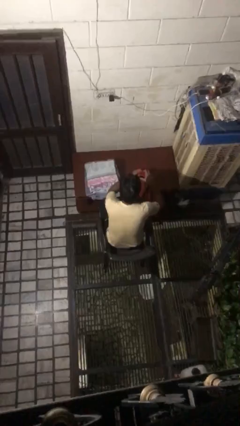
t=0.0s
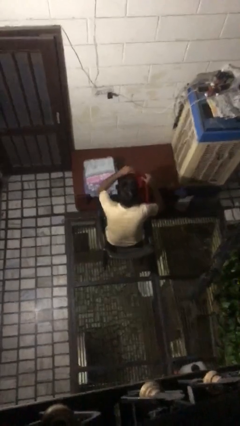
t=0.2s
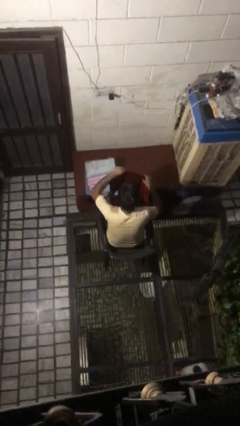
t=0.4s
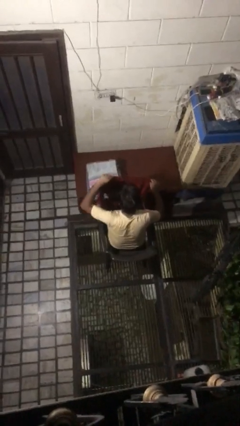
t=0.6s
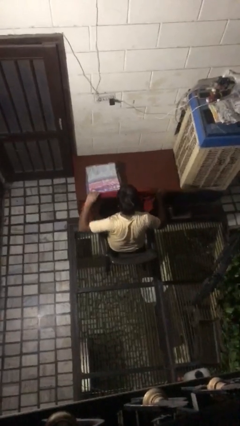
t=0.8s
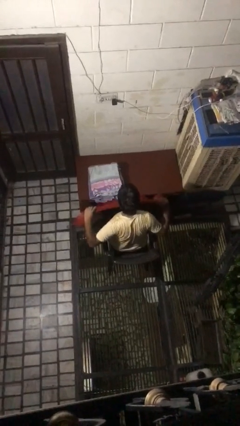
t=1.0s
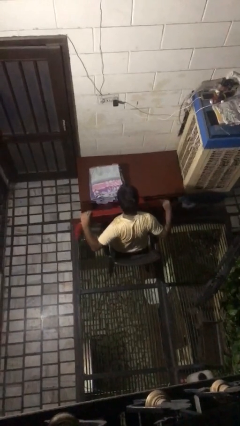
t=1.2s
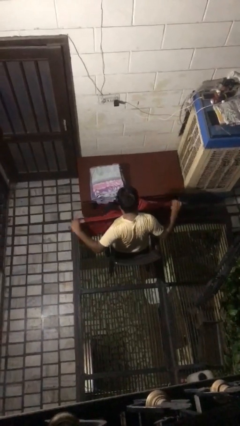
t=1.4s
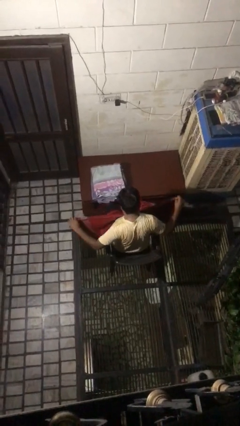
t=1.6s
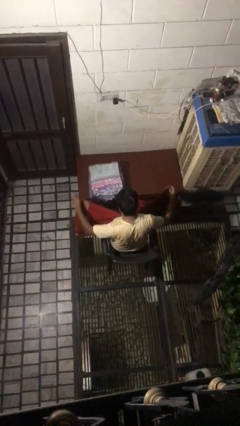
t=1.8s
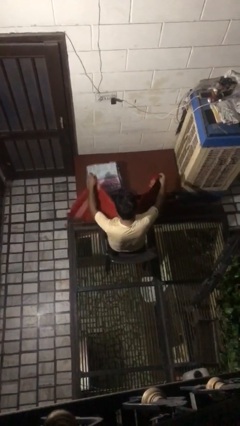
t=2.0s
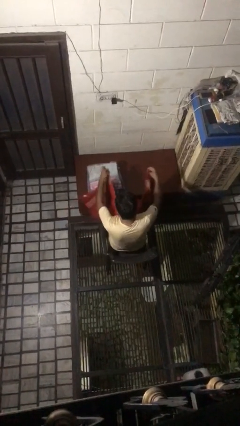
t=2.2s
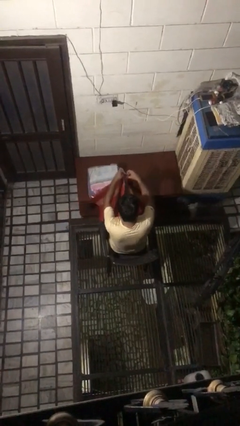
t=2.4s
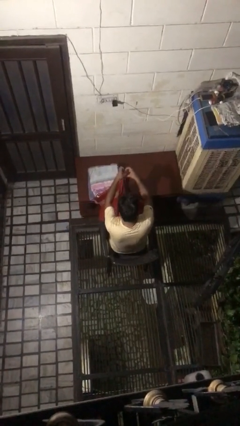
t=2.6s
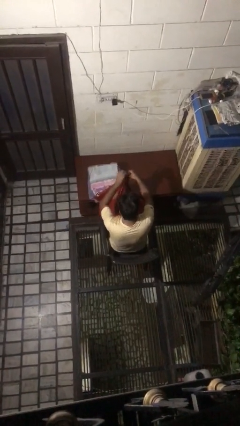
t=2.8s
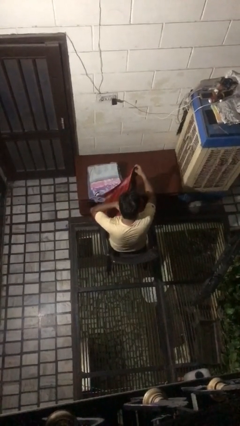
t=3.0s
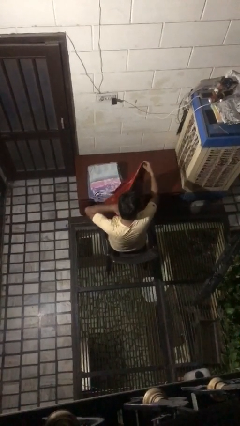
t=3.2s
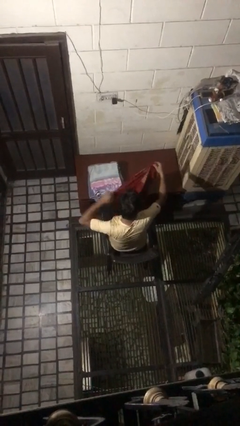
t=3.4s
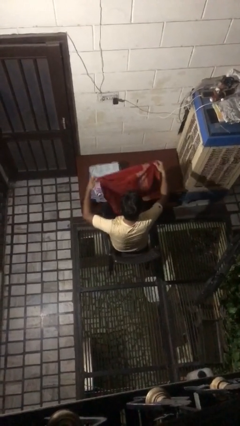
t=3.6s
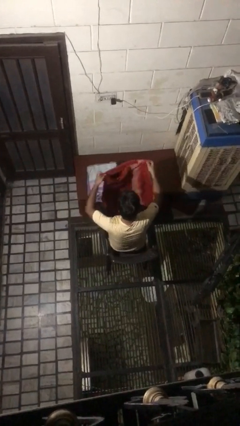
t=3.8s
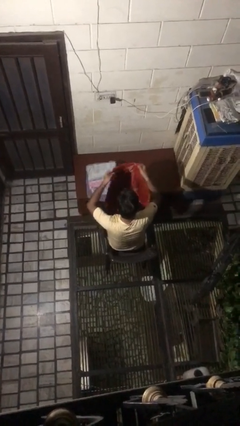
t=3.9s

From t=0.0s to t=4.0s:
person folds towel

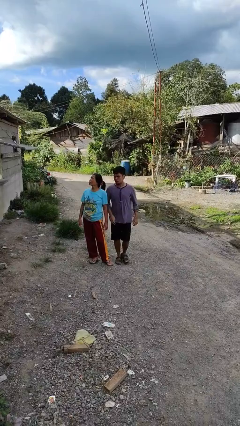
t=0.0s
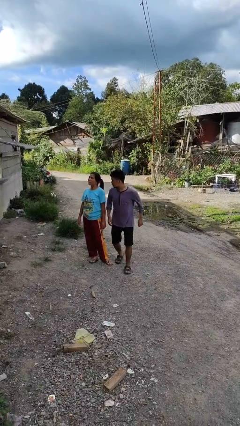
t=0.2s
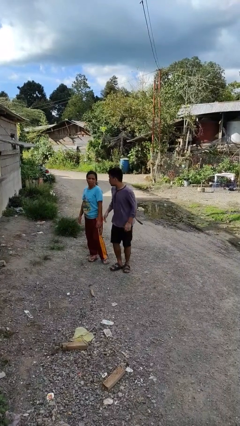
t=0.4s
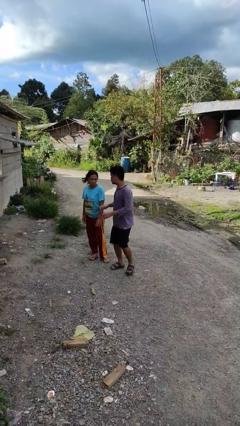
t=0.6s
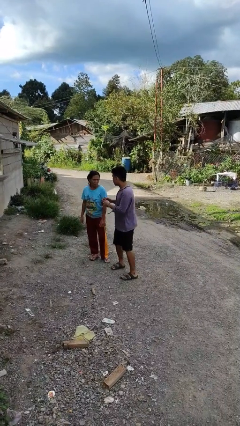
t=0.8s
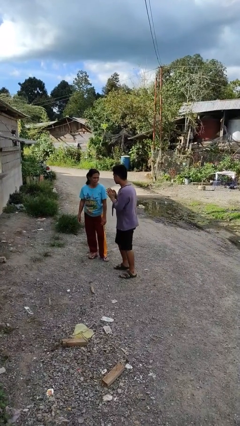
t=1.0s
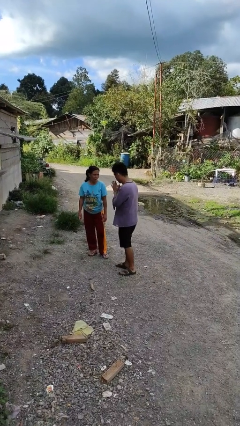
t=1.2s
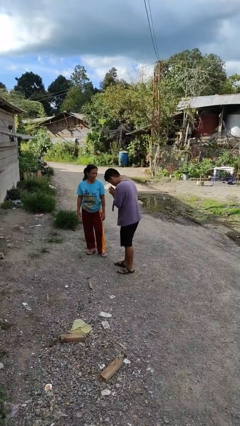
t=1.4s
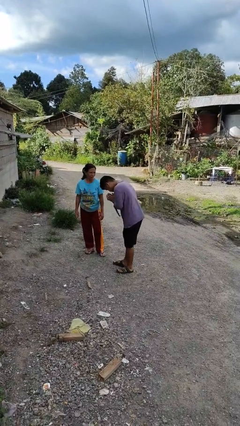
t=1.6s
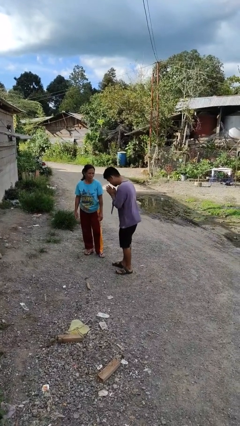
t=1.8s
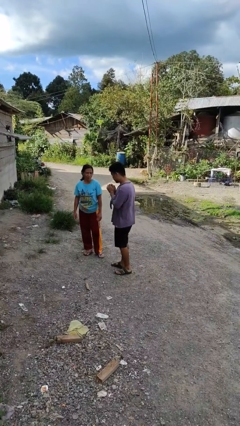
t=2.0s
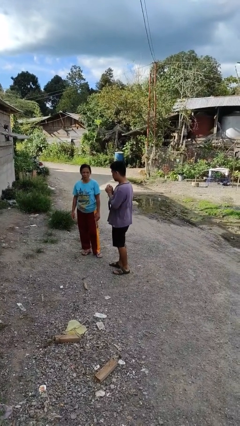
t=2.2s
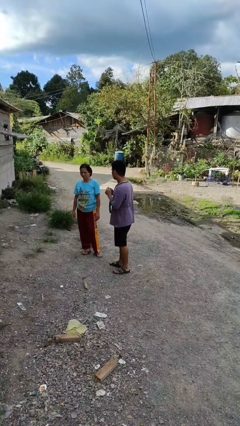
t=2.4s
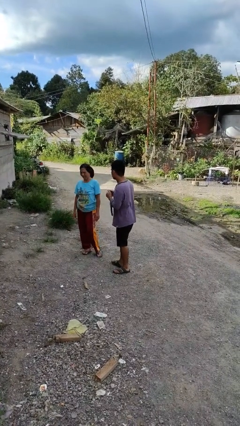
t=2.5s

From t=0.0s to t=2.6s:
person bumps into person

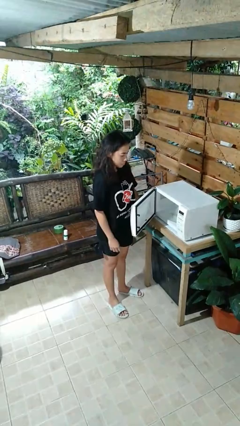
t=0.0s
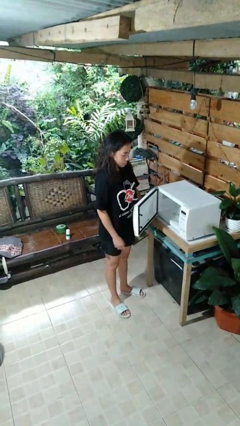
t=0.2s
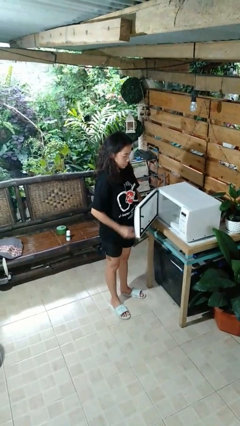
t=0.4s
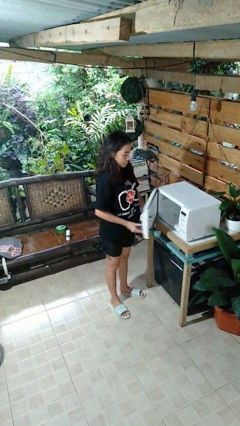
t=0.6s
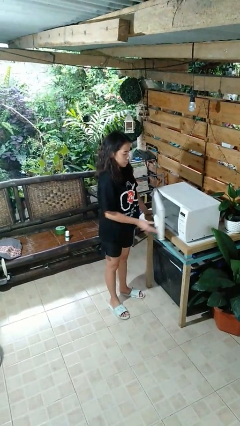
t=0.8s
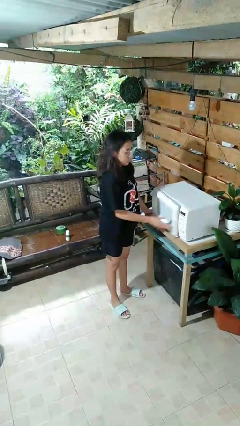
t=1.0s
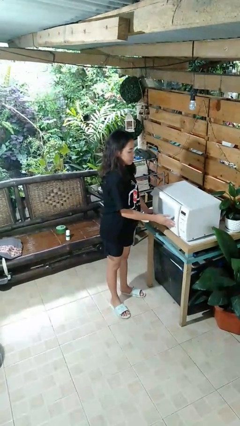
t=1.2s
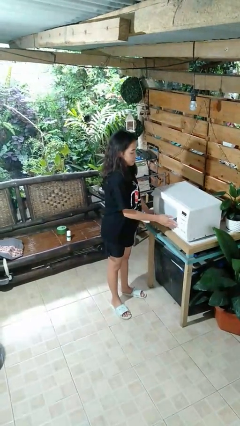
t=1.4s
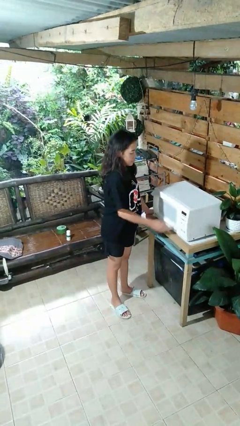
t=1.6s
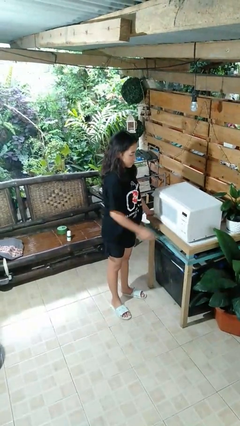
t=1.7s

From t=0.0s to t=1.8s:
person closes microwave

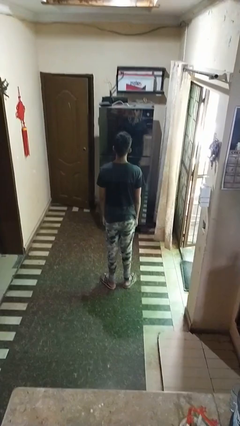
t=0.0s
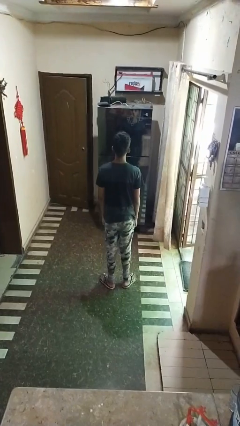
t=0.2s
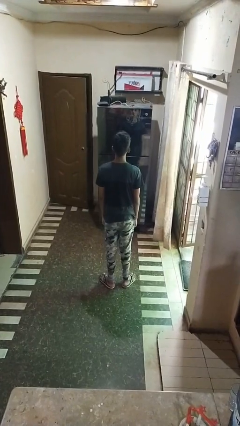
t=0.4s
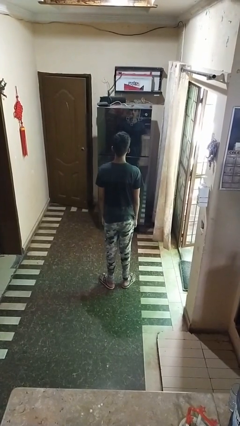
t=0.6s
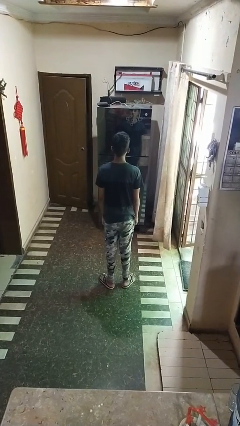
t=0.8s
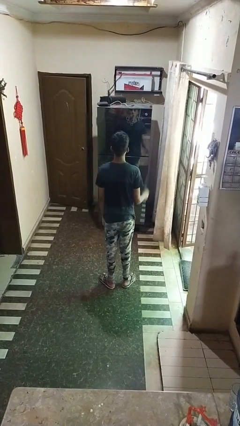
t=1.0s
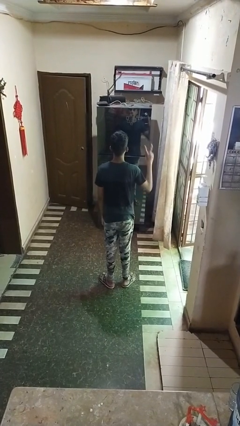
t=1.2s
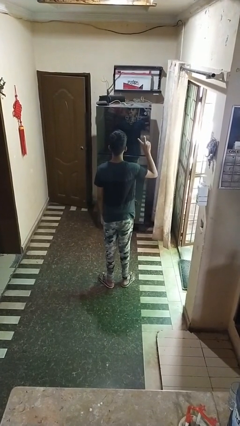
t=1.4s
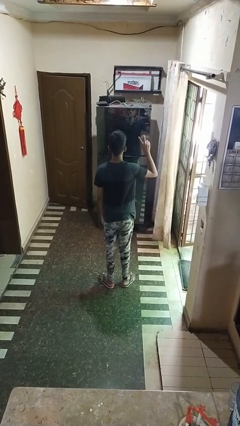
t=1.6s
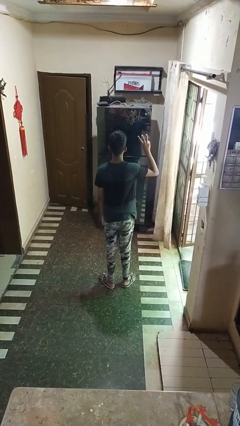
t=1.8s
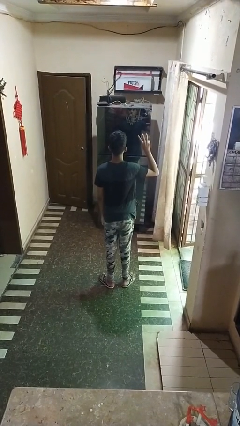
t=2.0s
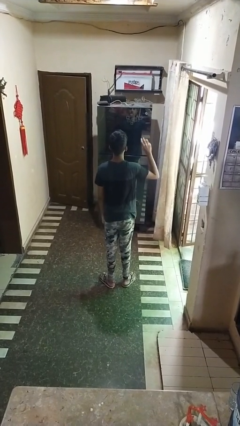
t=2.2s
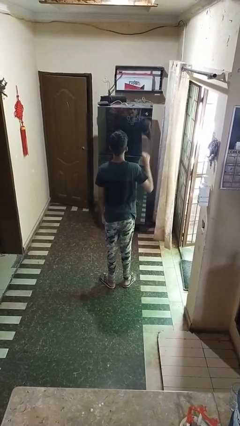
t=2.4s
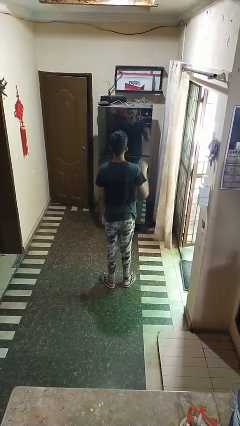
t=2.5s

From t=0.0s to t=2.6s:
person gestures number three

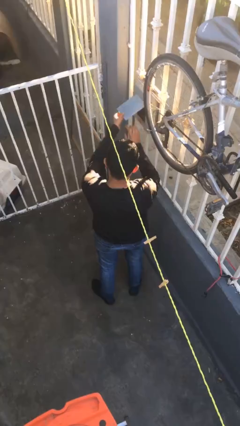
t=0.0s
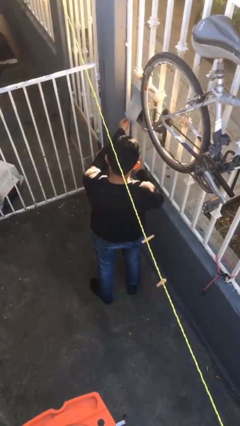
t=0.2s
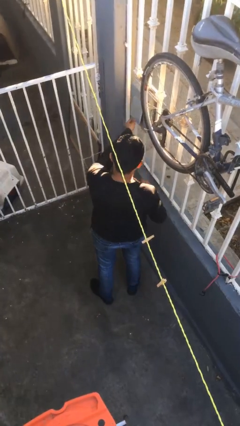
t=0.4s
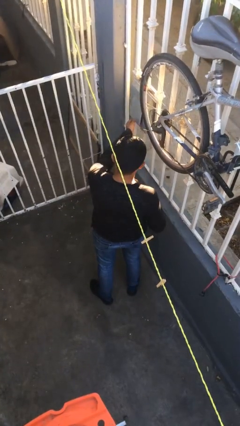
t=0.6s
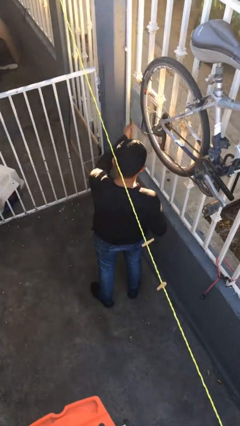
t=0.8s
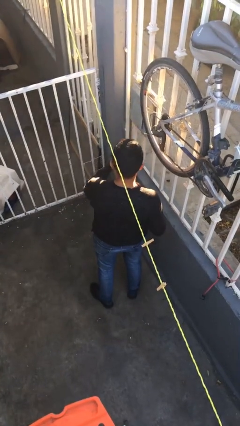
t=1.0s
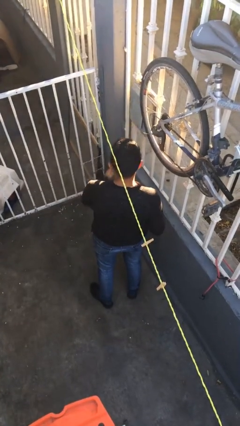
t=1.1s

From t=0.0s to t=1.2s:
person closes mailbox

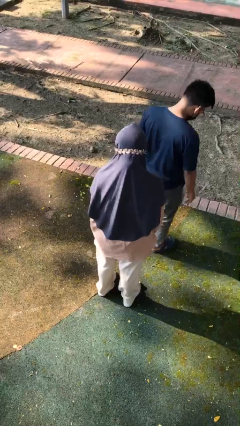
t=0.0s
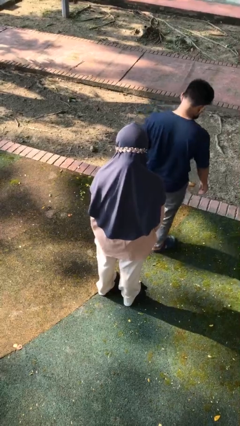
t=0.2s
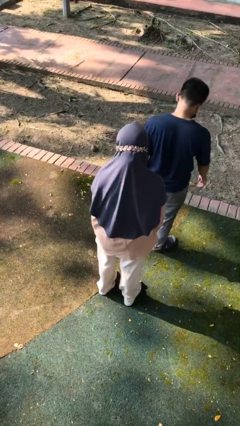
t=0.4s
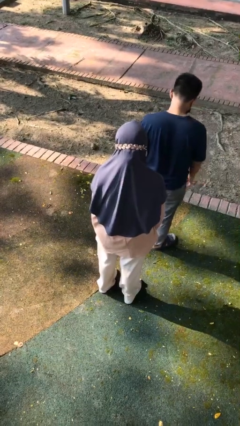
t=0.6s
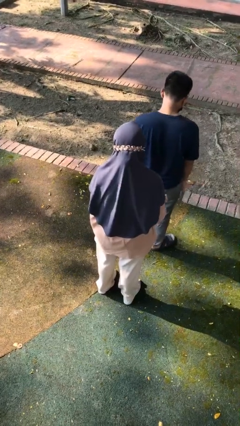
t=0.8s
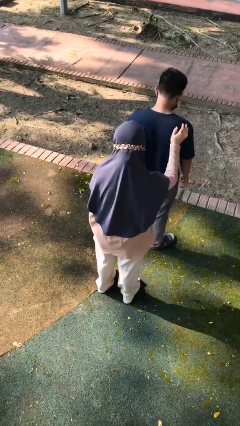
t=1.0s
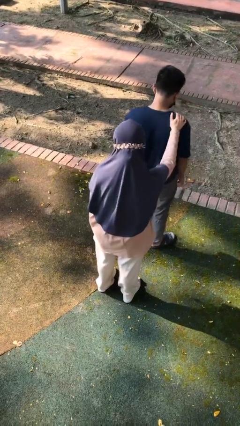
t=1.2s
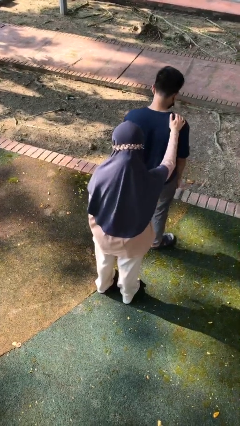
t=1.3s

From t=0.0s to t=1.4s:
person grabs person by shoulder

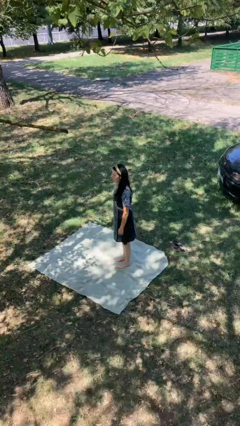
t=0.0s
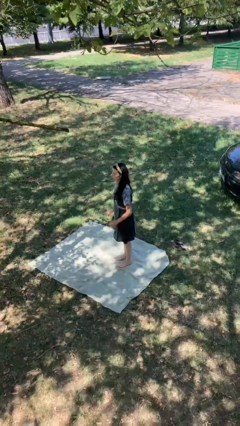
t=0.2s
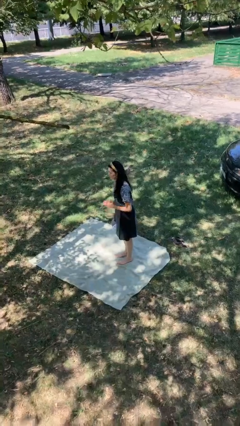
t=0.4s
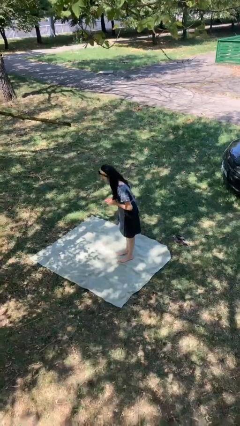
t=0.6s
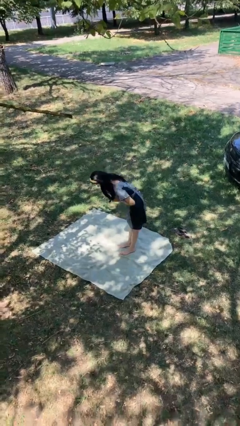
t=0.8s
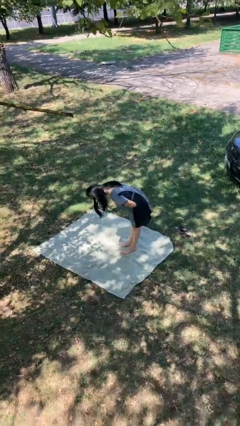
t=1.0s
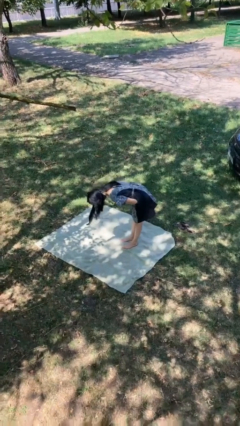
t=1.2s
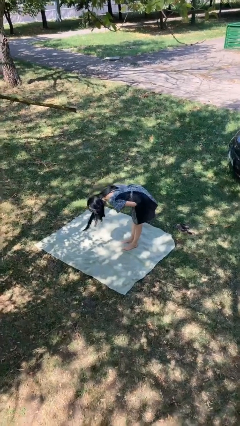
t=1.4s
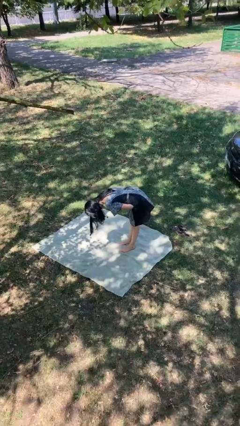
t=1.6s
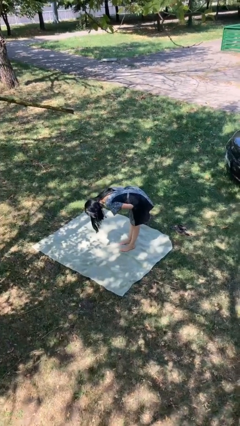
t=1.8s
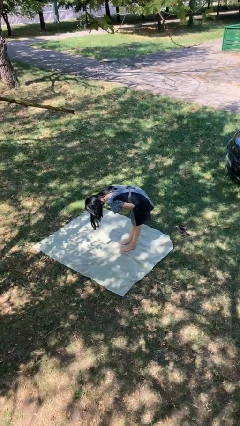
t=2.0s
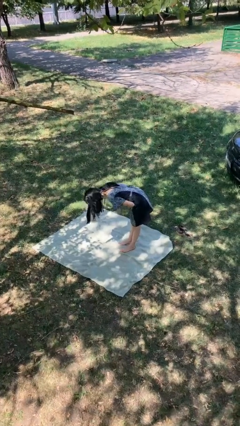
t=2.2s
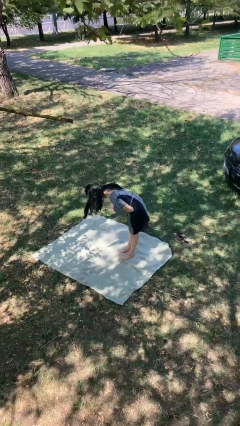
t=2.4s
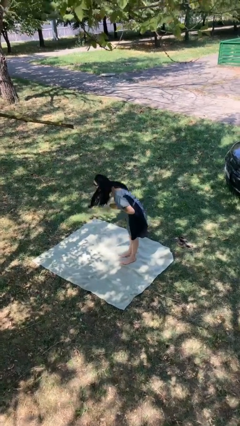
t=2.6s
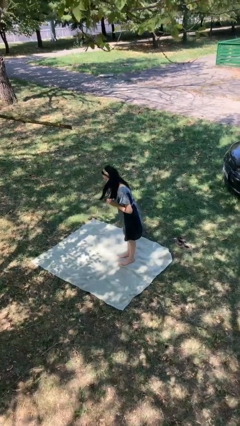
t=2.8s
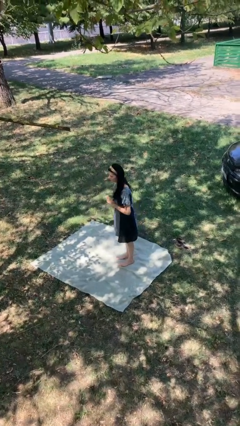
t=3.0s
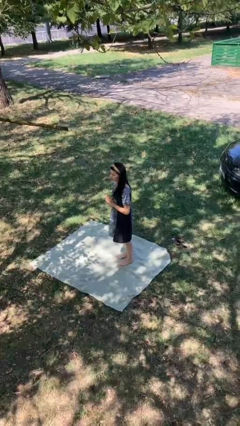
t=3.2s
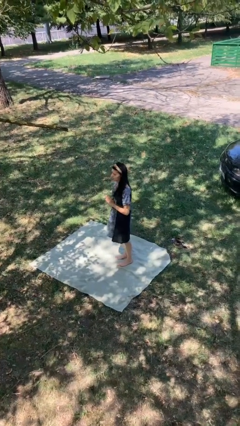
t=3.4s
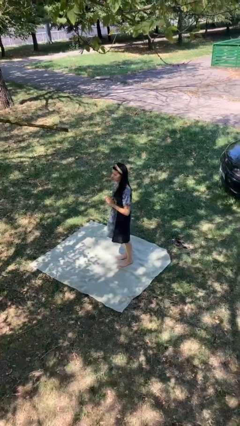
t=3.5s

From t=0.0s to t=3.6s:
person bows
